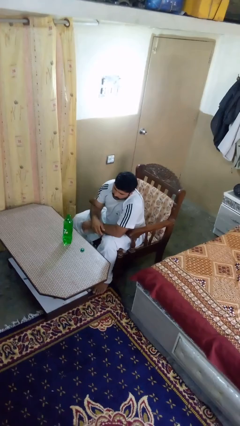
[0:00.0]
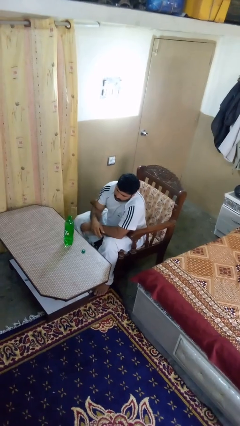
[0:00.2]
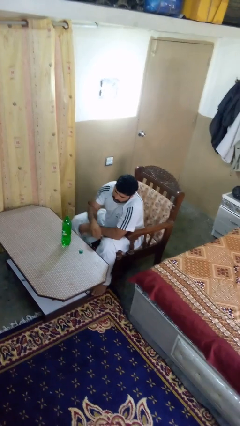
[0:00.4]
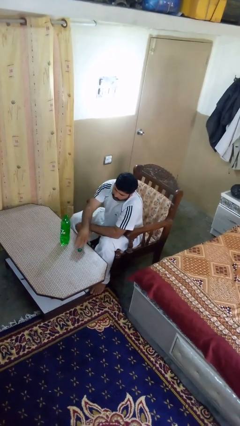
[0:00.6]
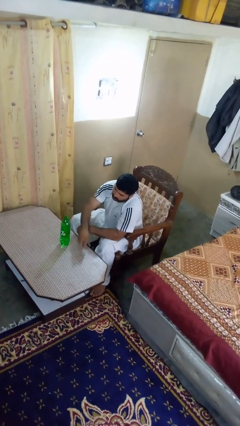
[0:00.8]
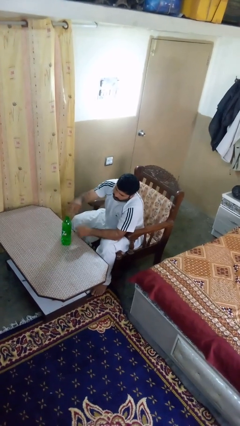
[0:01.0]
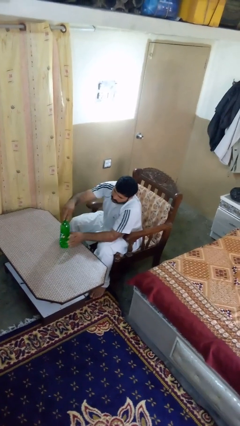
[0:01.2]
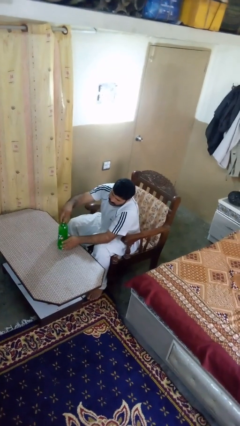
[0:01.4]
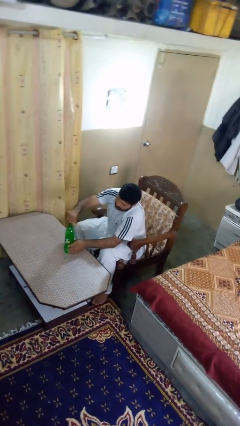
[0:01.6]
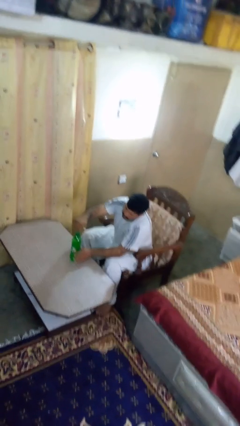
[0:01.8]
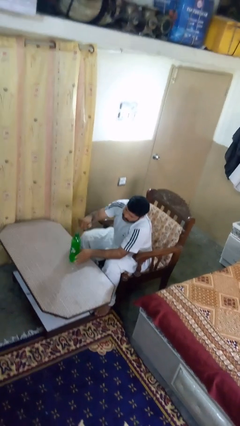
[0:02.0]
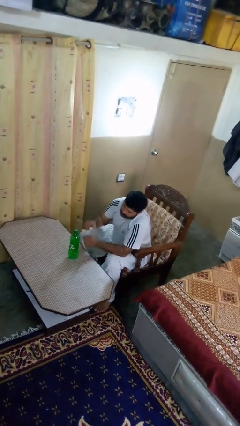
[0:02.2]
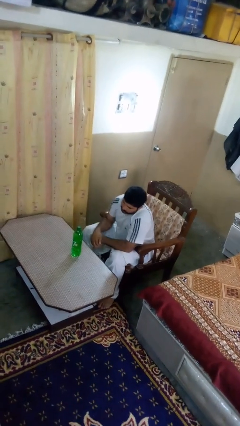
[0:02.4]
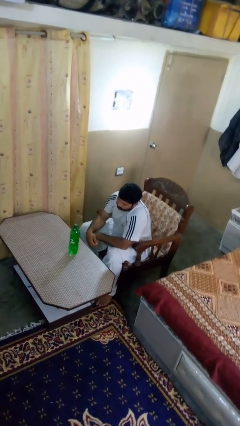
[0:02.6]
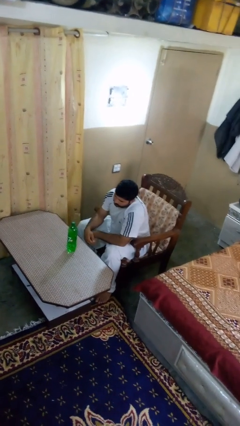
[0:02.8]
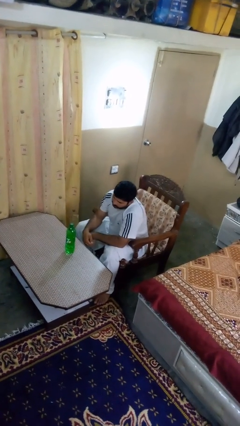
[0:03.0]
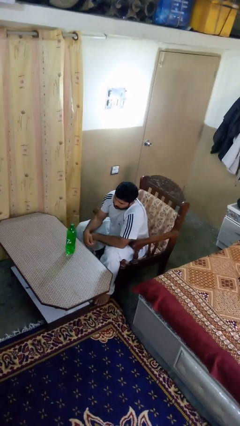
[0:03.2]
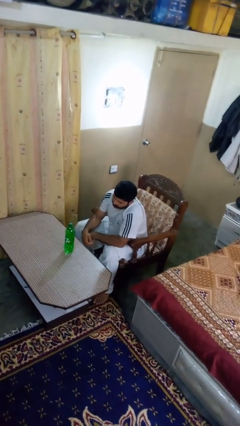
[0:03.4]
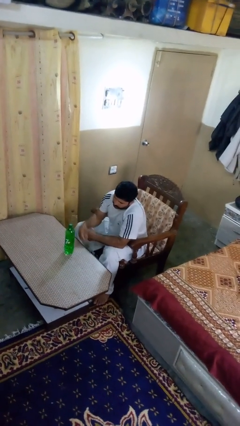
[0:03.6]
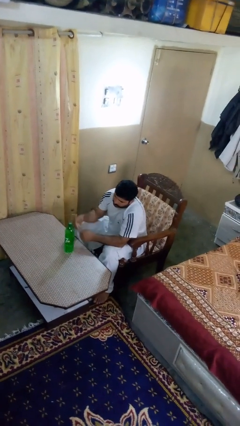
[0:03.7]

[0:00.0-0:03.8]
person screws lid to bottle

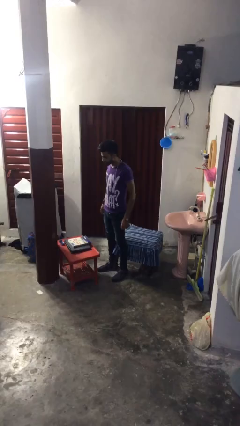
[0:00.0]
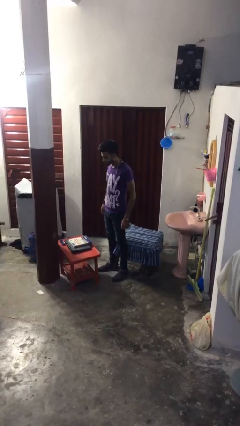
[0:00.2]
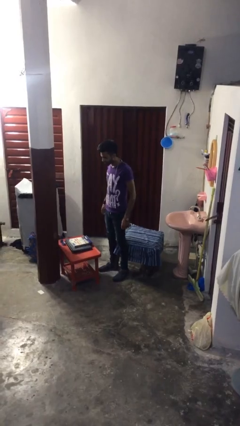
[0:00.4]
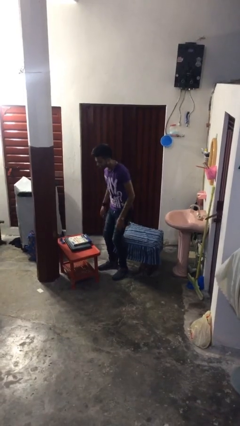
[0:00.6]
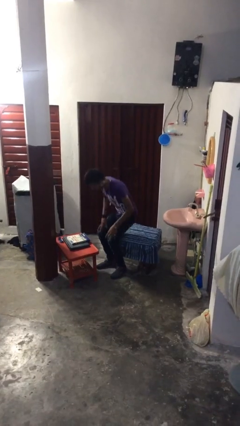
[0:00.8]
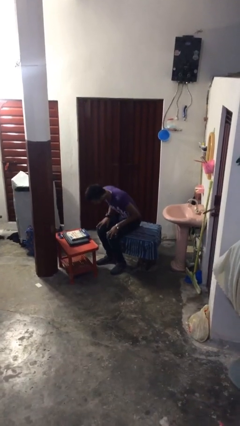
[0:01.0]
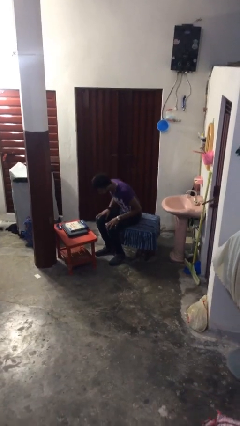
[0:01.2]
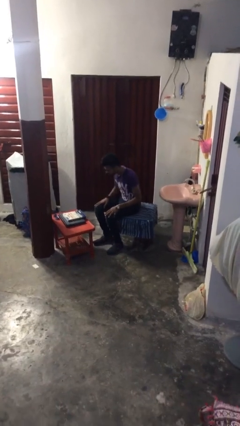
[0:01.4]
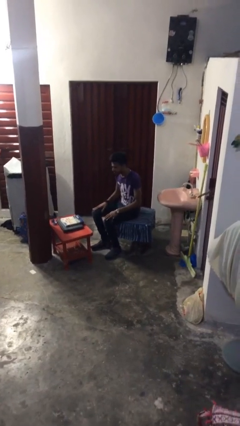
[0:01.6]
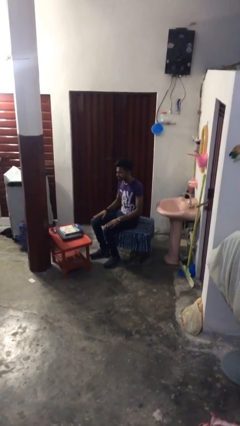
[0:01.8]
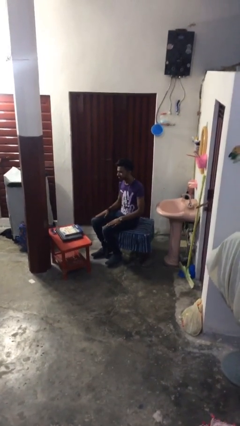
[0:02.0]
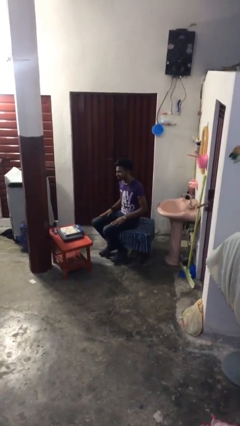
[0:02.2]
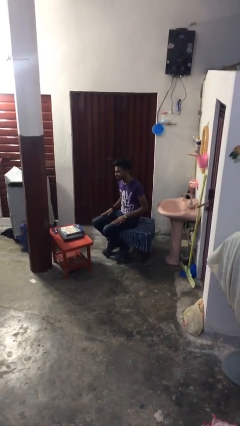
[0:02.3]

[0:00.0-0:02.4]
person sits down

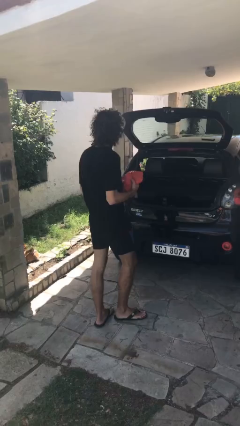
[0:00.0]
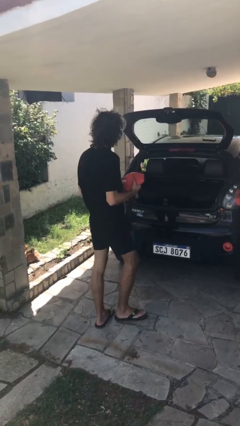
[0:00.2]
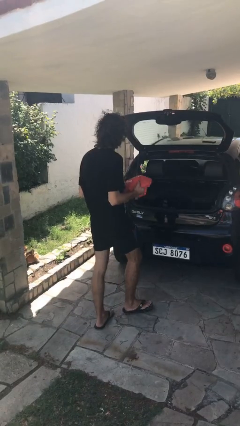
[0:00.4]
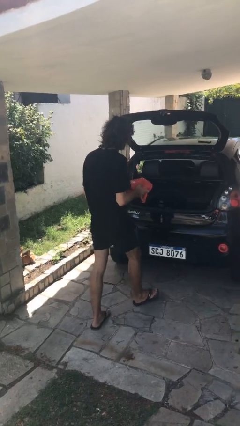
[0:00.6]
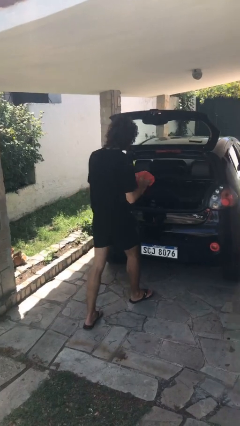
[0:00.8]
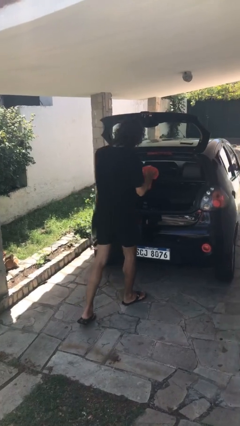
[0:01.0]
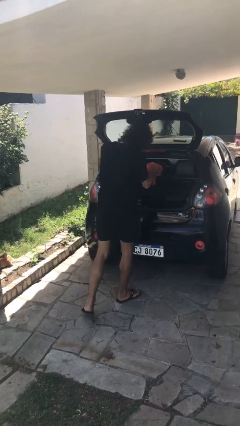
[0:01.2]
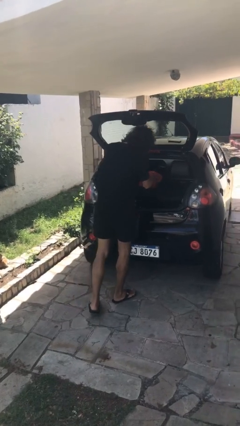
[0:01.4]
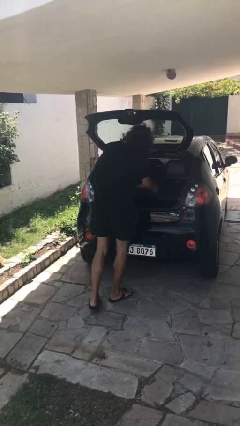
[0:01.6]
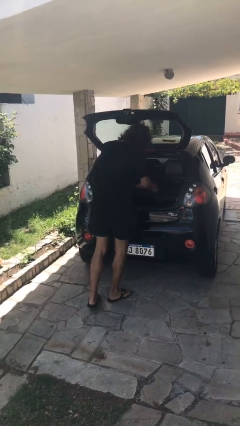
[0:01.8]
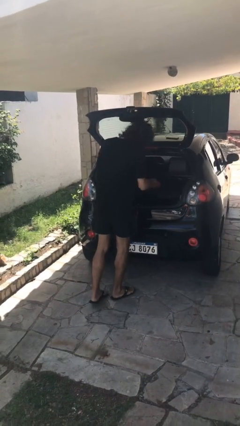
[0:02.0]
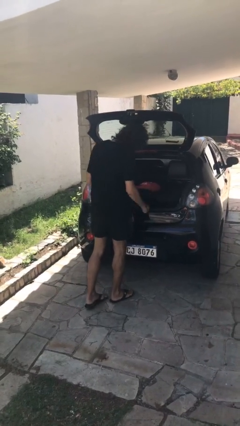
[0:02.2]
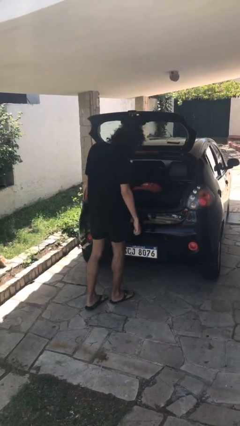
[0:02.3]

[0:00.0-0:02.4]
person loads car

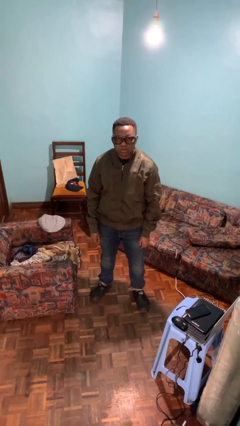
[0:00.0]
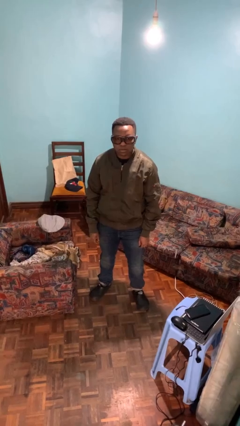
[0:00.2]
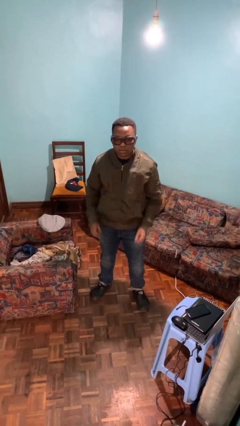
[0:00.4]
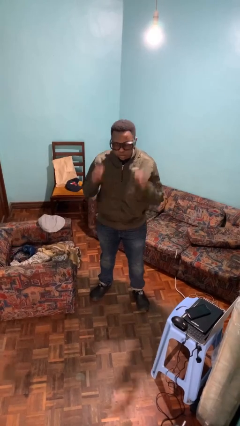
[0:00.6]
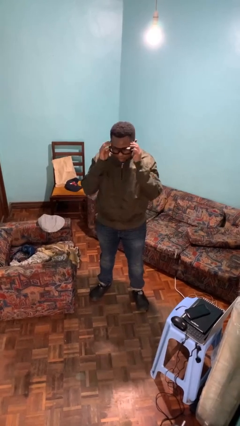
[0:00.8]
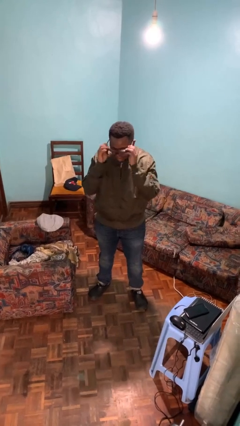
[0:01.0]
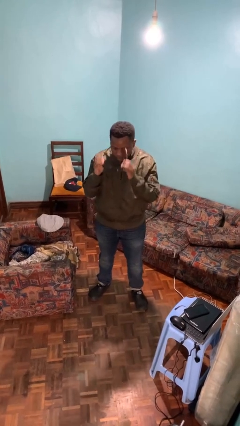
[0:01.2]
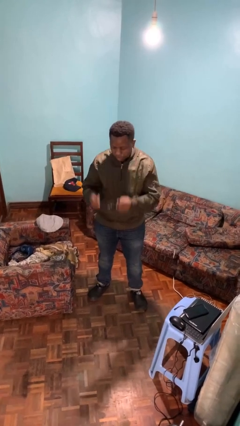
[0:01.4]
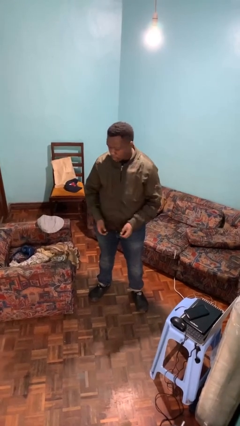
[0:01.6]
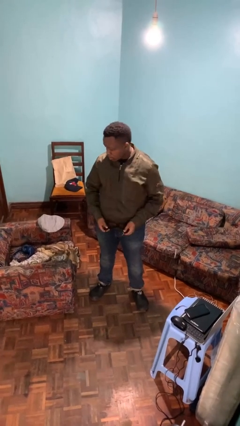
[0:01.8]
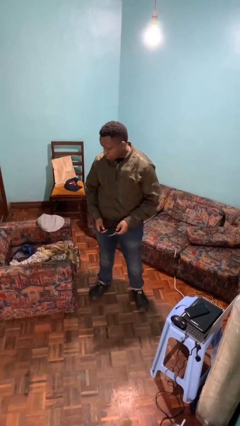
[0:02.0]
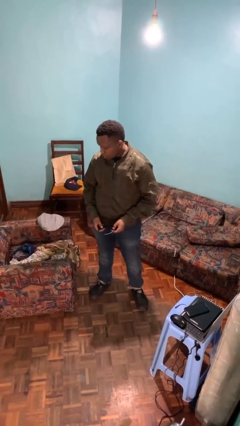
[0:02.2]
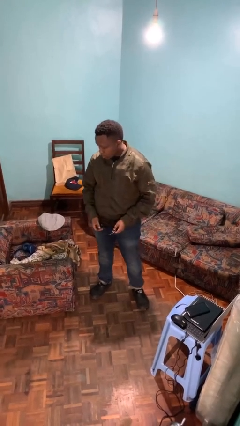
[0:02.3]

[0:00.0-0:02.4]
person takes off glasses

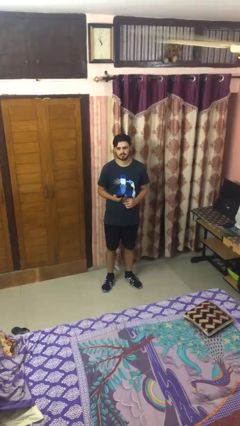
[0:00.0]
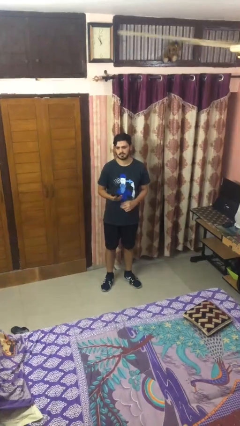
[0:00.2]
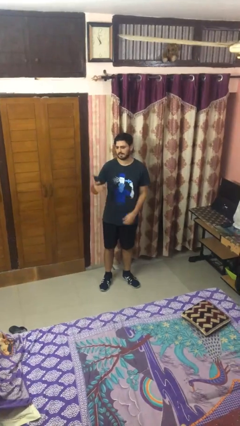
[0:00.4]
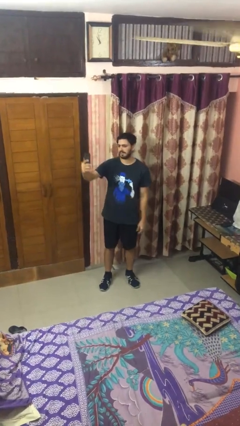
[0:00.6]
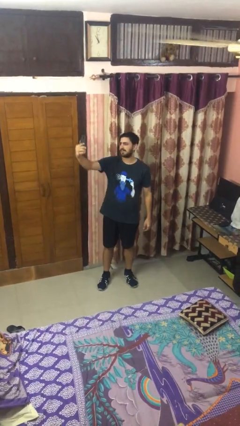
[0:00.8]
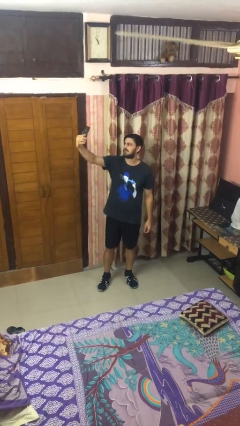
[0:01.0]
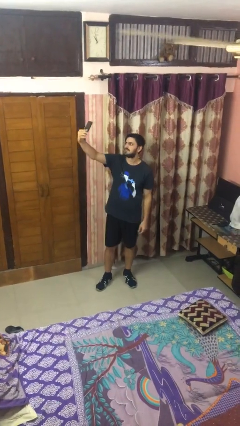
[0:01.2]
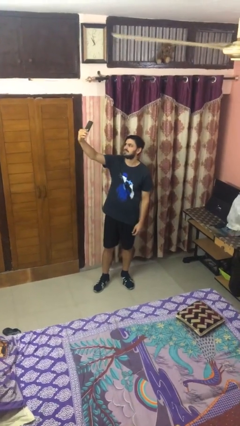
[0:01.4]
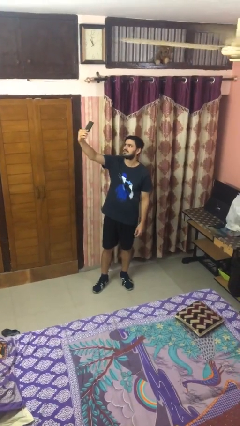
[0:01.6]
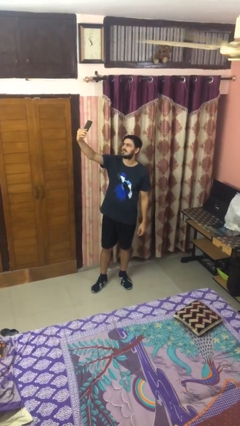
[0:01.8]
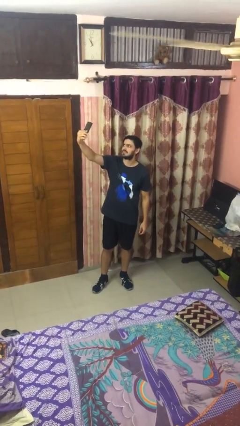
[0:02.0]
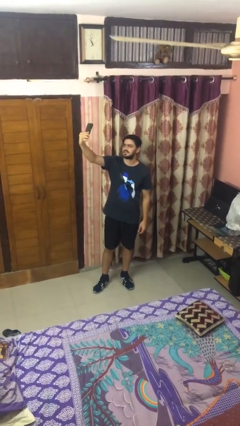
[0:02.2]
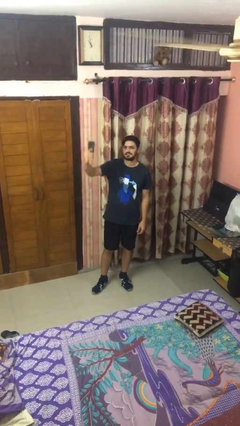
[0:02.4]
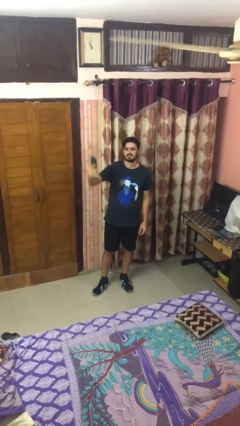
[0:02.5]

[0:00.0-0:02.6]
person takes selfie

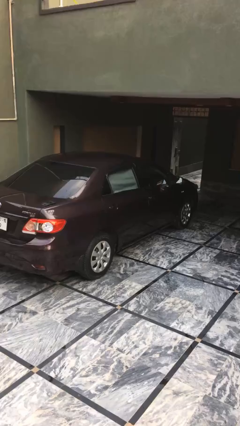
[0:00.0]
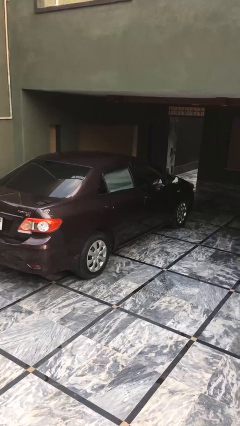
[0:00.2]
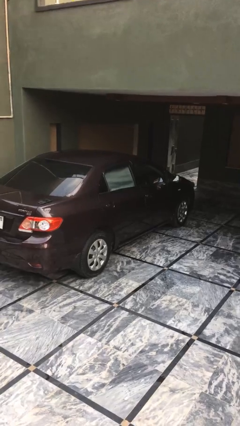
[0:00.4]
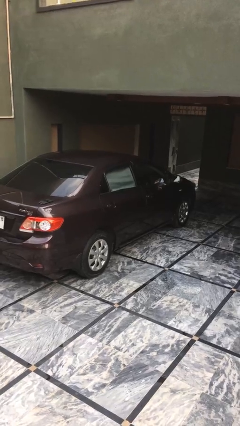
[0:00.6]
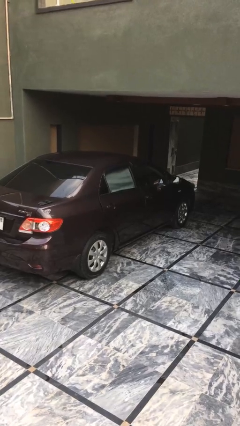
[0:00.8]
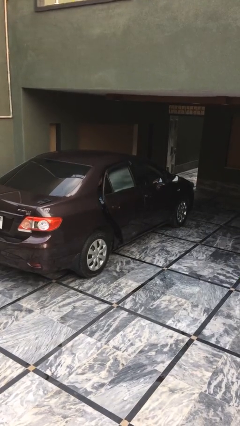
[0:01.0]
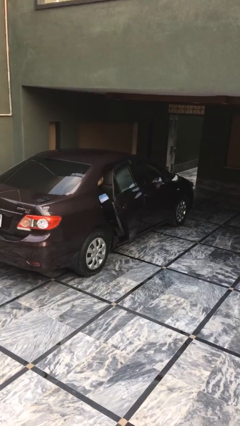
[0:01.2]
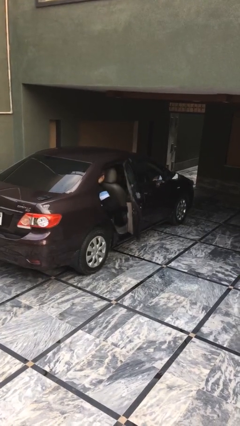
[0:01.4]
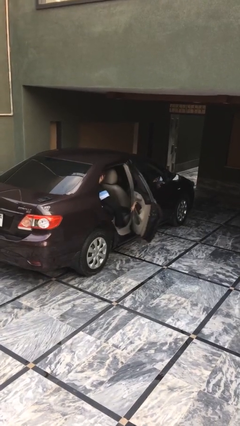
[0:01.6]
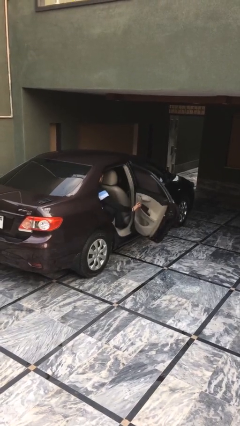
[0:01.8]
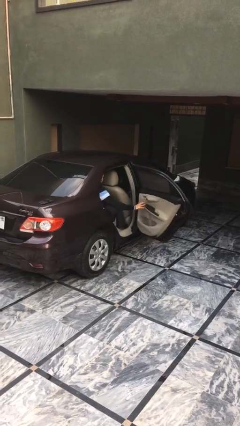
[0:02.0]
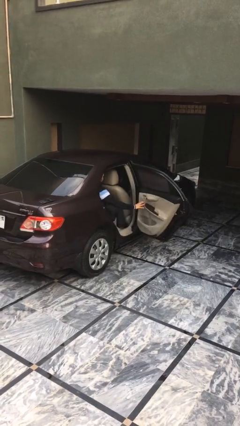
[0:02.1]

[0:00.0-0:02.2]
person opens car door

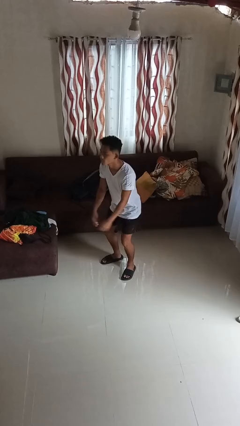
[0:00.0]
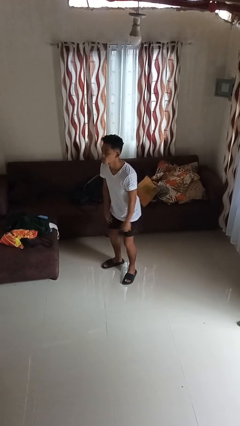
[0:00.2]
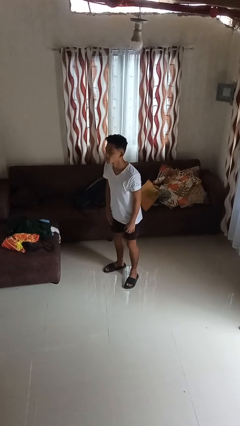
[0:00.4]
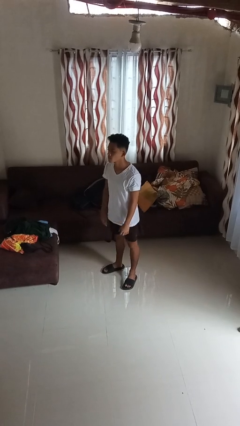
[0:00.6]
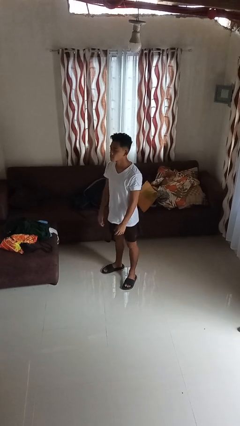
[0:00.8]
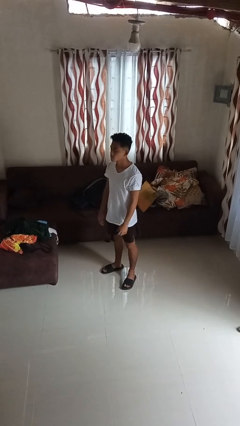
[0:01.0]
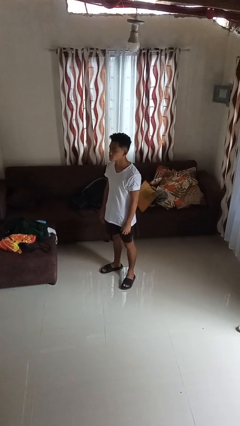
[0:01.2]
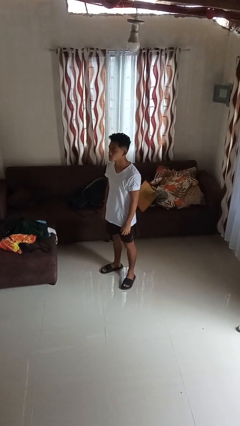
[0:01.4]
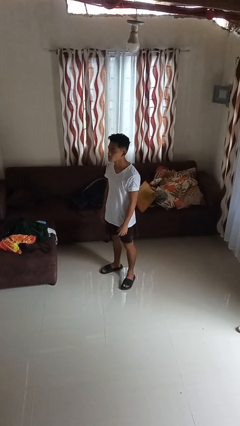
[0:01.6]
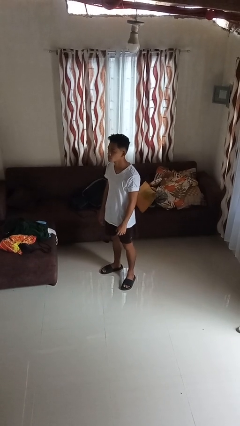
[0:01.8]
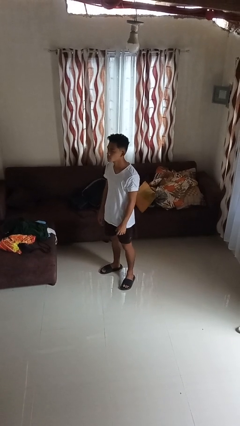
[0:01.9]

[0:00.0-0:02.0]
person stands up
